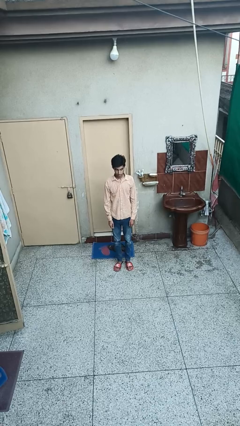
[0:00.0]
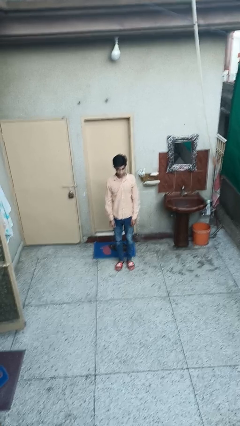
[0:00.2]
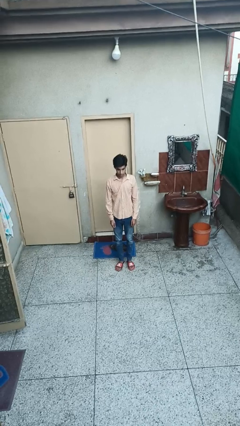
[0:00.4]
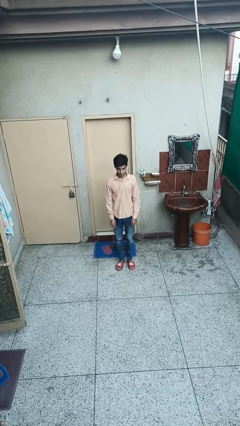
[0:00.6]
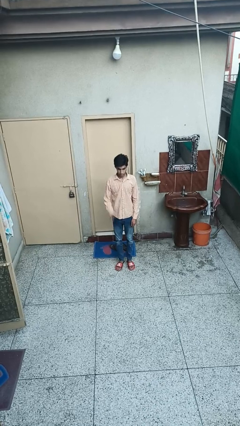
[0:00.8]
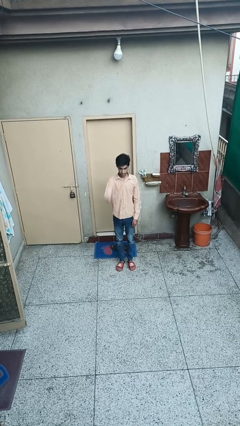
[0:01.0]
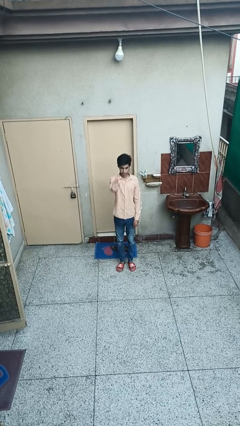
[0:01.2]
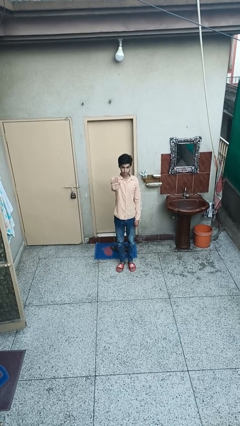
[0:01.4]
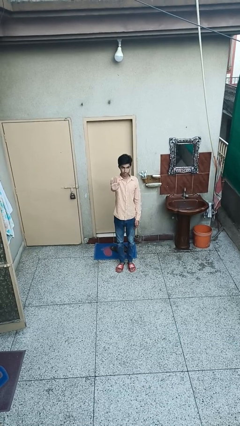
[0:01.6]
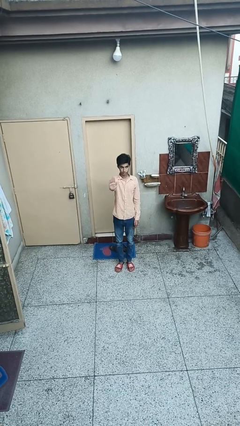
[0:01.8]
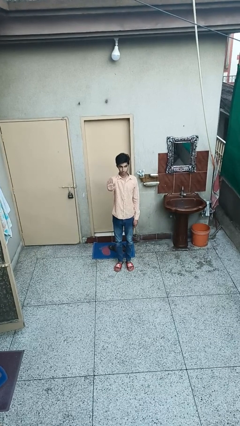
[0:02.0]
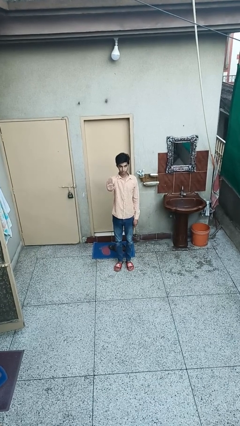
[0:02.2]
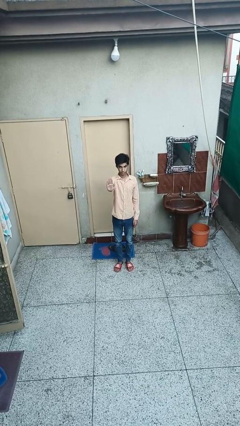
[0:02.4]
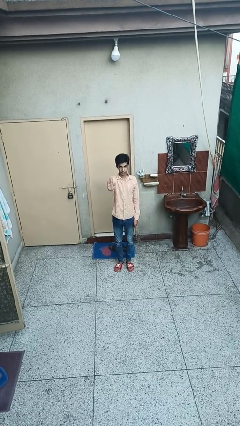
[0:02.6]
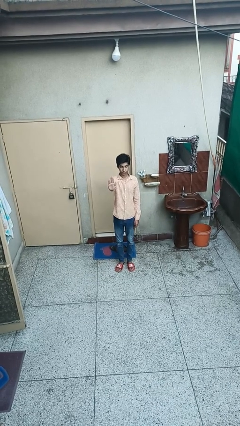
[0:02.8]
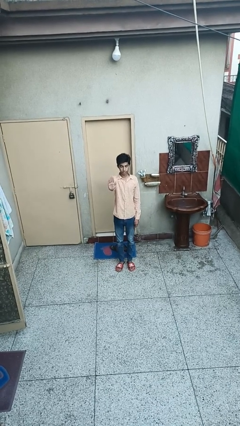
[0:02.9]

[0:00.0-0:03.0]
person gestures stop

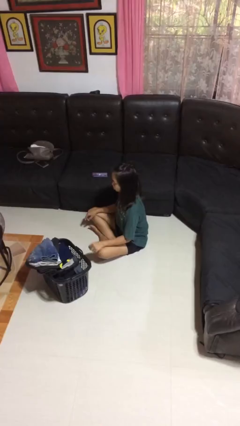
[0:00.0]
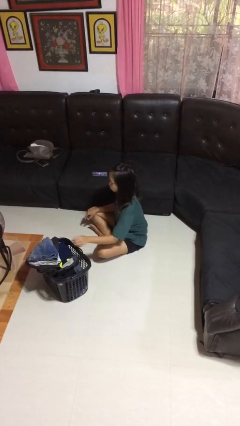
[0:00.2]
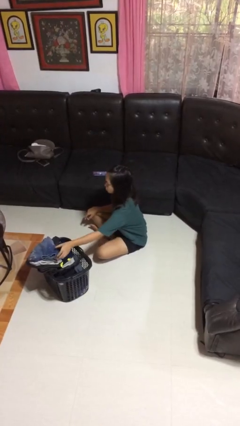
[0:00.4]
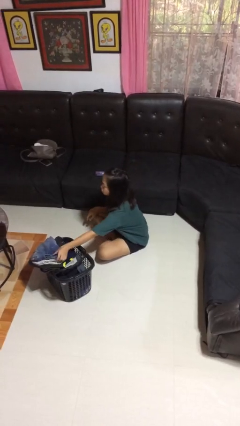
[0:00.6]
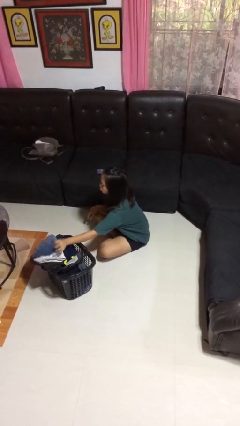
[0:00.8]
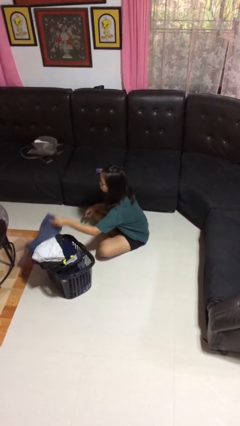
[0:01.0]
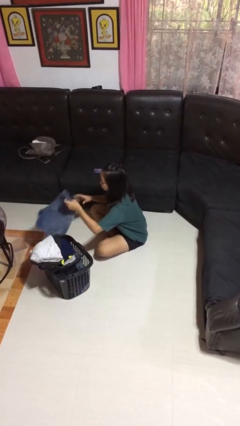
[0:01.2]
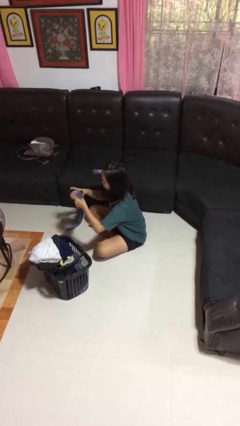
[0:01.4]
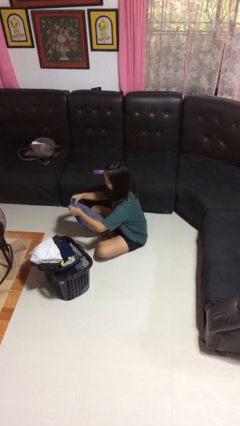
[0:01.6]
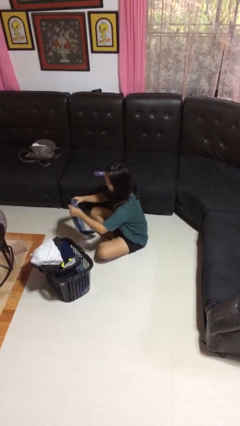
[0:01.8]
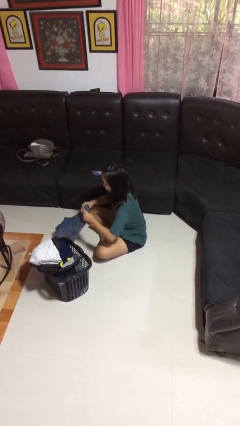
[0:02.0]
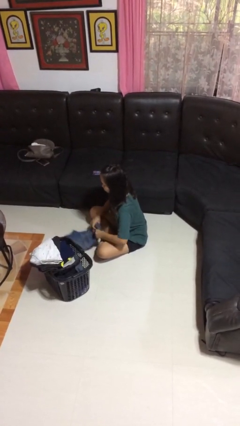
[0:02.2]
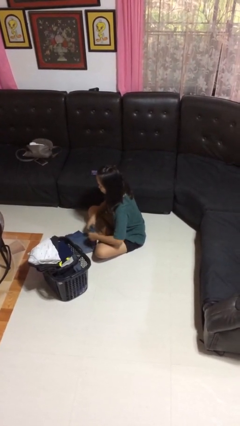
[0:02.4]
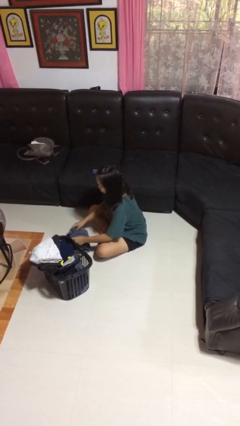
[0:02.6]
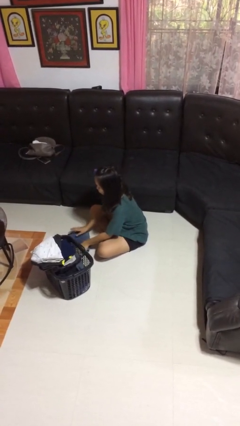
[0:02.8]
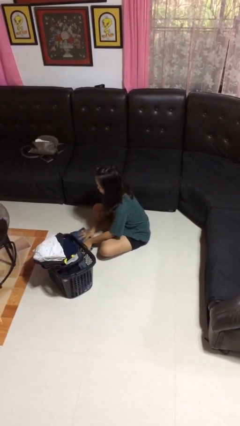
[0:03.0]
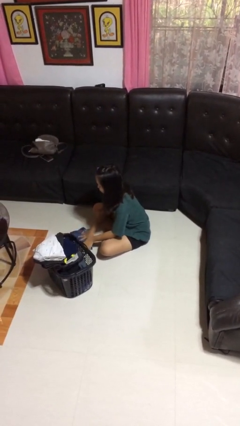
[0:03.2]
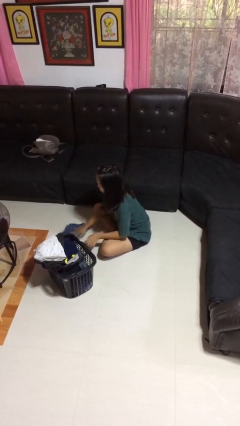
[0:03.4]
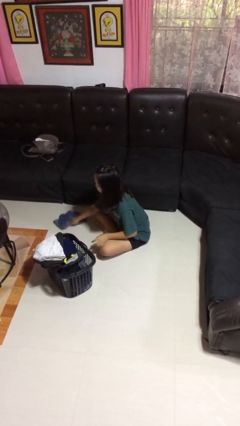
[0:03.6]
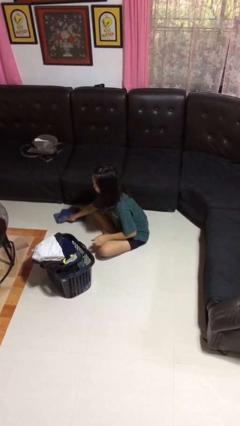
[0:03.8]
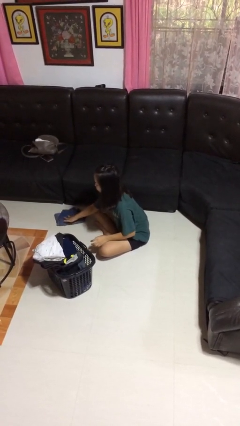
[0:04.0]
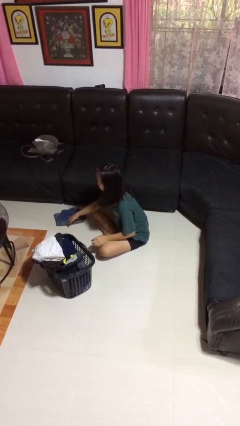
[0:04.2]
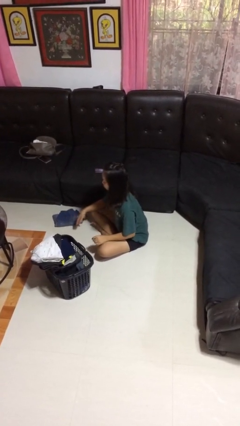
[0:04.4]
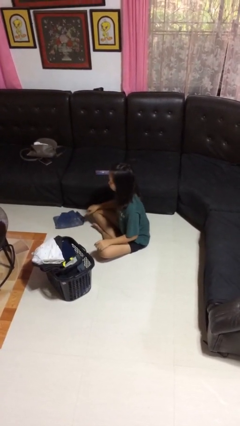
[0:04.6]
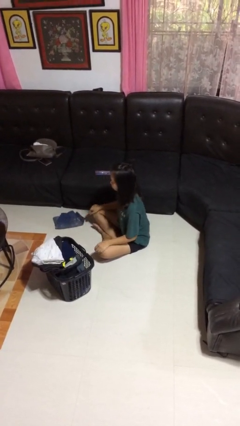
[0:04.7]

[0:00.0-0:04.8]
person folds pants

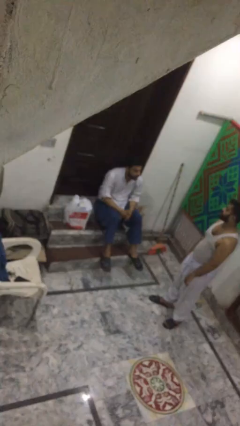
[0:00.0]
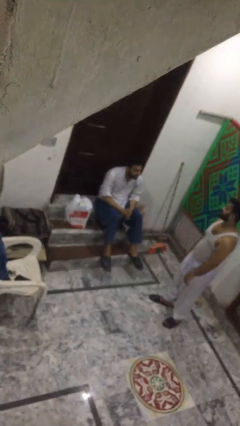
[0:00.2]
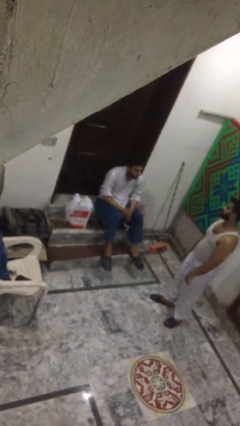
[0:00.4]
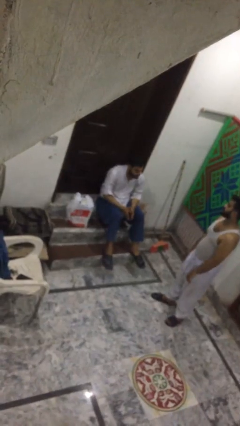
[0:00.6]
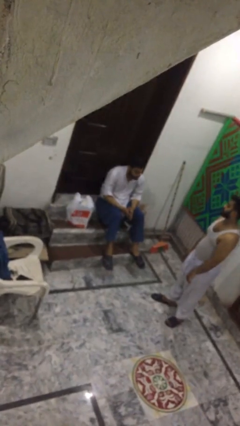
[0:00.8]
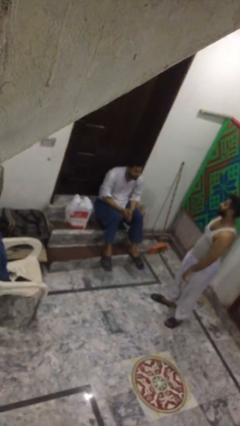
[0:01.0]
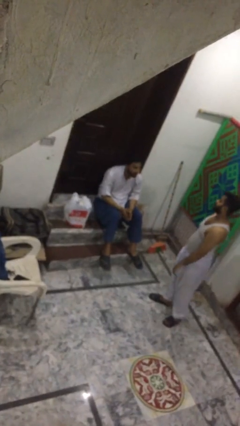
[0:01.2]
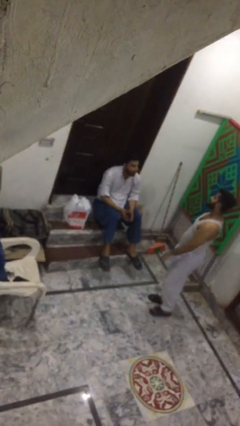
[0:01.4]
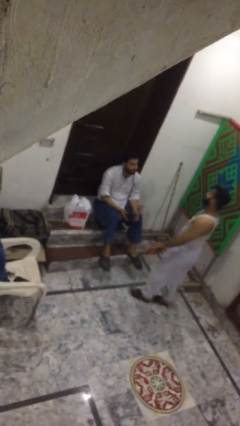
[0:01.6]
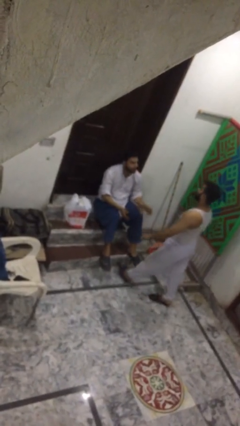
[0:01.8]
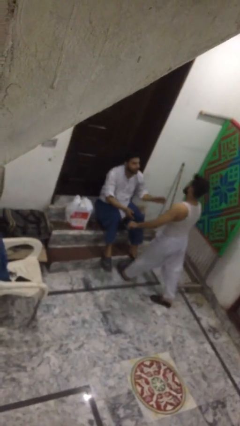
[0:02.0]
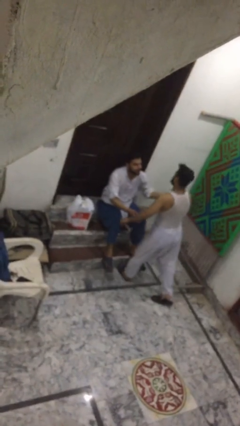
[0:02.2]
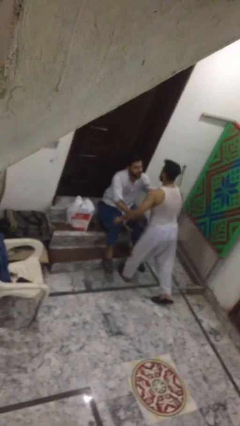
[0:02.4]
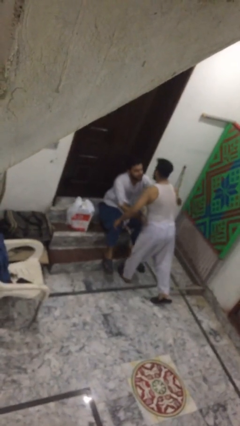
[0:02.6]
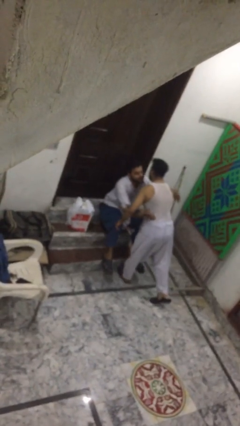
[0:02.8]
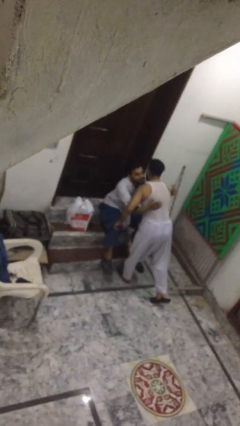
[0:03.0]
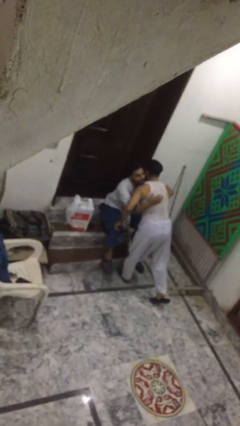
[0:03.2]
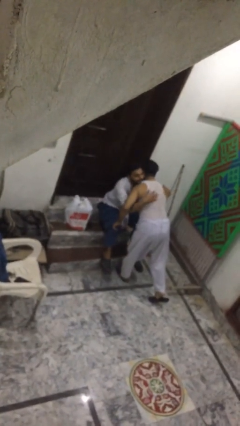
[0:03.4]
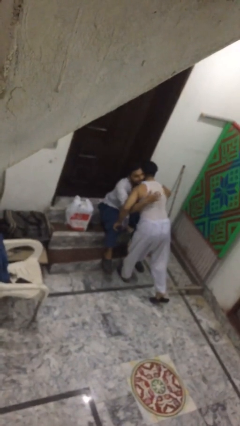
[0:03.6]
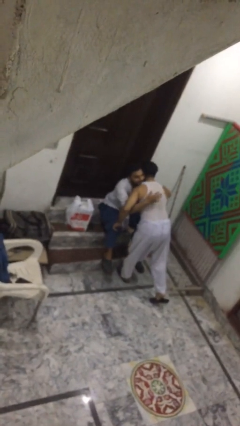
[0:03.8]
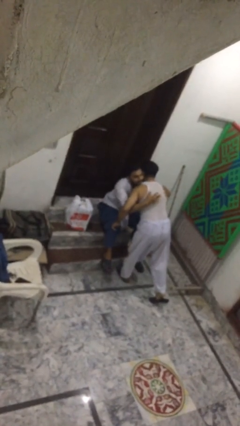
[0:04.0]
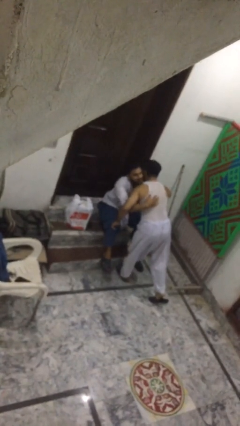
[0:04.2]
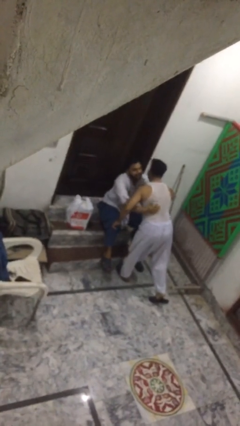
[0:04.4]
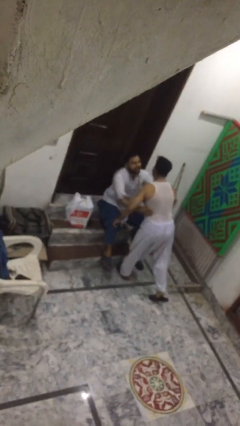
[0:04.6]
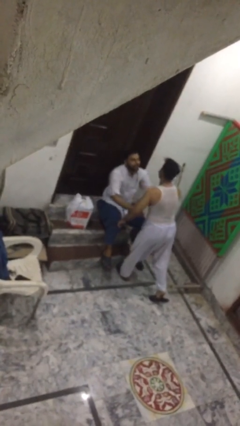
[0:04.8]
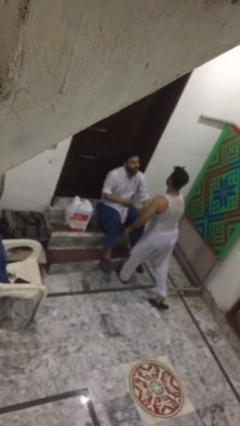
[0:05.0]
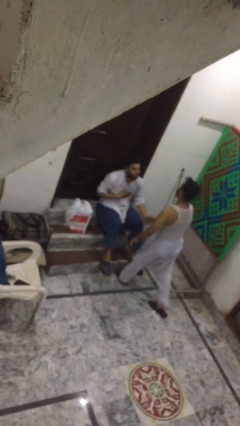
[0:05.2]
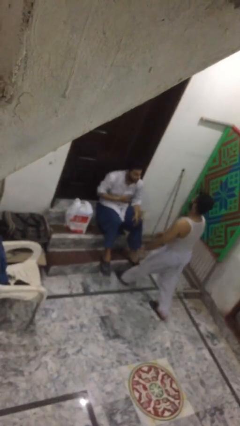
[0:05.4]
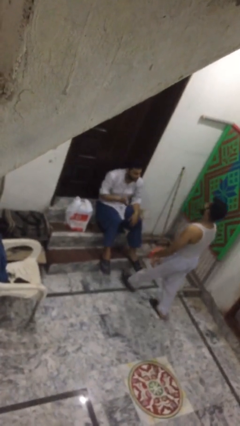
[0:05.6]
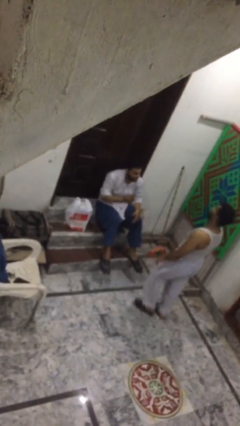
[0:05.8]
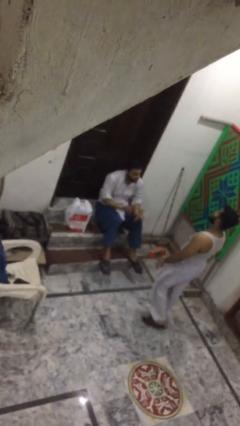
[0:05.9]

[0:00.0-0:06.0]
person embraces person

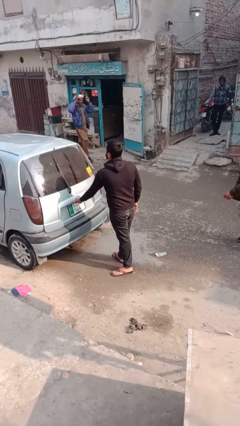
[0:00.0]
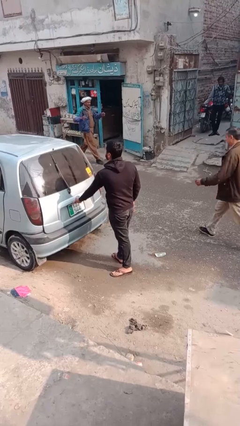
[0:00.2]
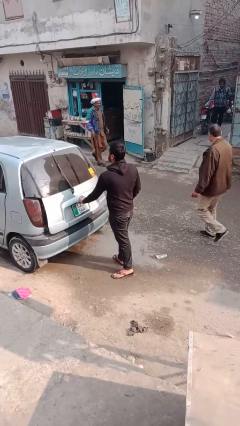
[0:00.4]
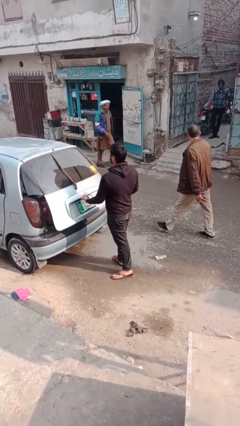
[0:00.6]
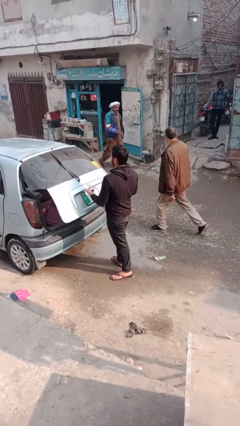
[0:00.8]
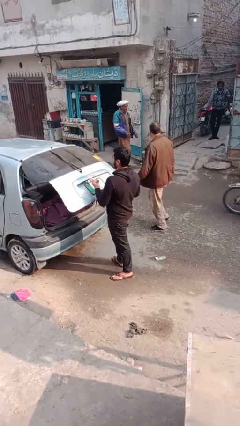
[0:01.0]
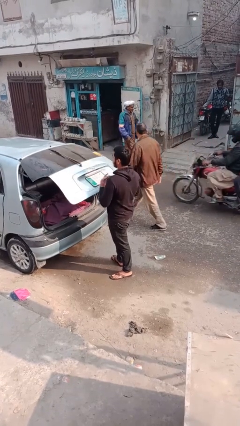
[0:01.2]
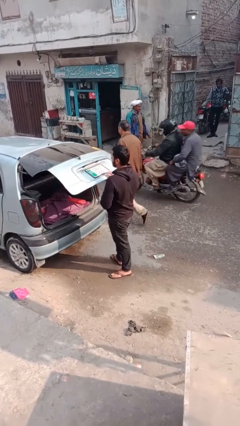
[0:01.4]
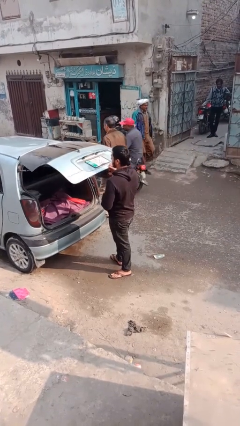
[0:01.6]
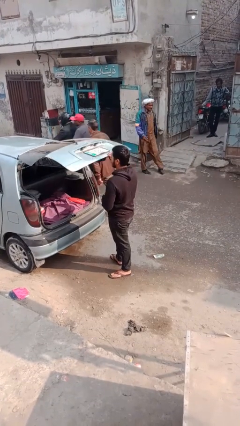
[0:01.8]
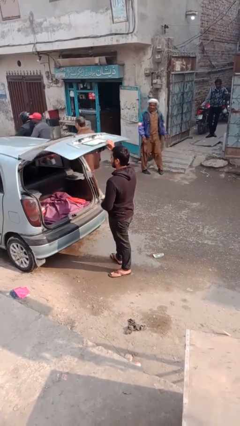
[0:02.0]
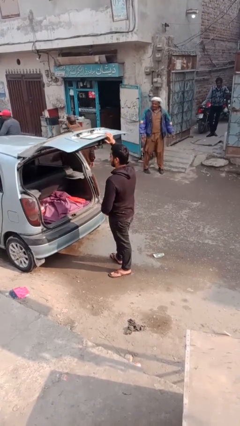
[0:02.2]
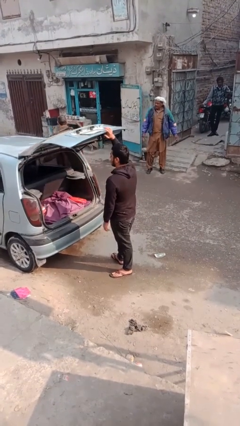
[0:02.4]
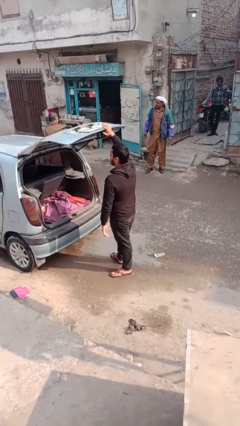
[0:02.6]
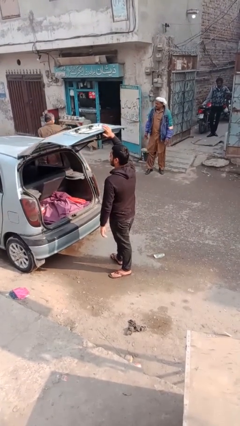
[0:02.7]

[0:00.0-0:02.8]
person opens car trunk

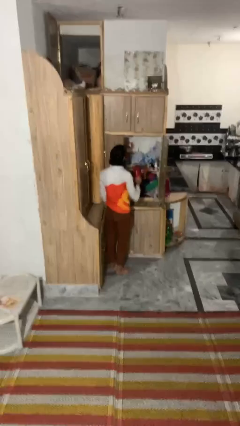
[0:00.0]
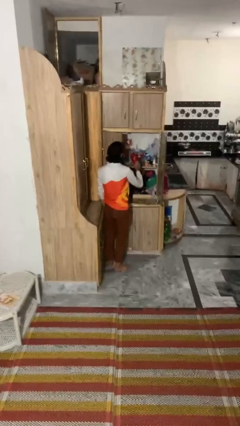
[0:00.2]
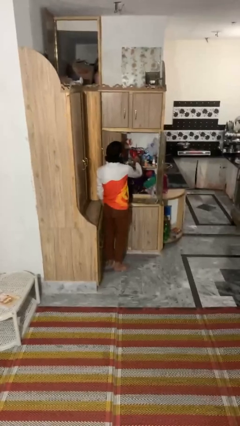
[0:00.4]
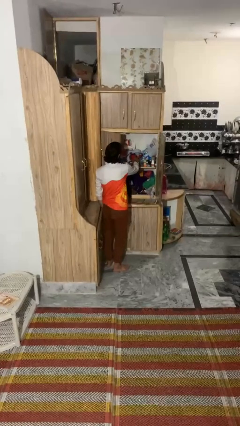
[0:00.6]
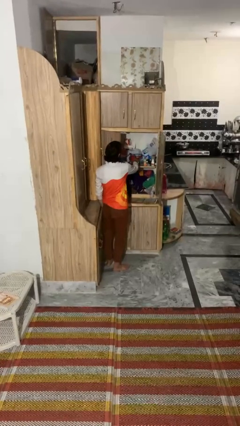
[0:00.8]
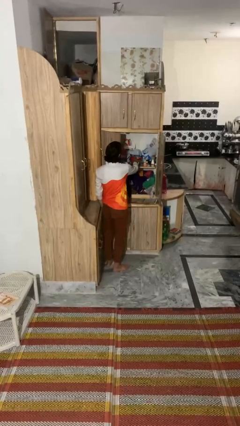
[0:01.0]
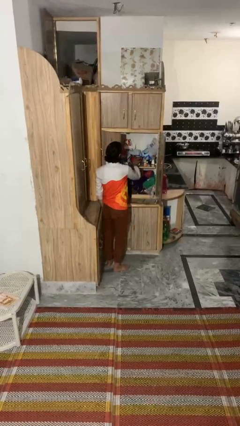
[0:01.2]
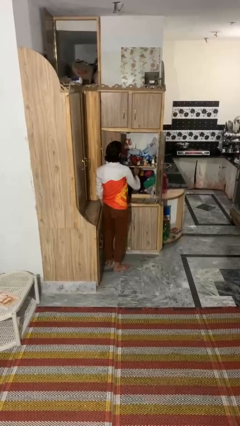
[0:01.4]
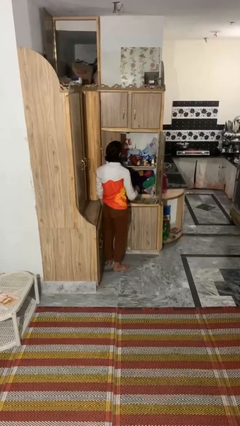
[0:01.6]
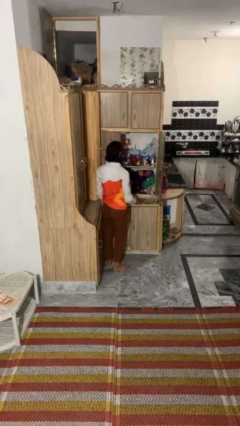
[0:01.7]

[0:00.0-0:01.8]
person puts down object into cabinet
